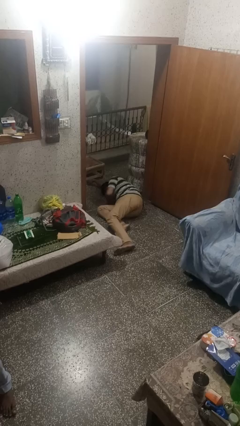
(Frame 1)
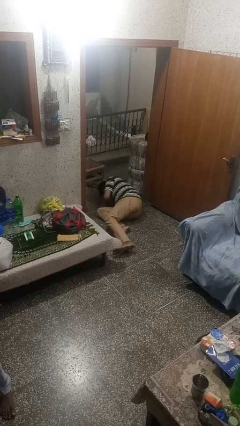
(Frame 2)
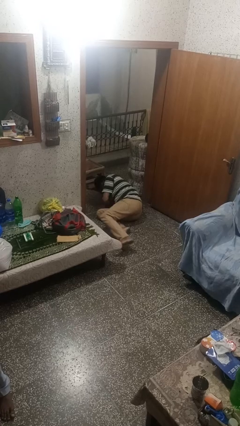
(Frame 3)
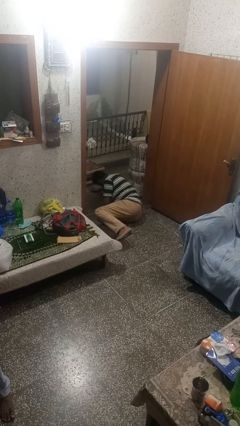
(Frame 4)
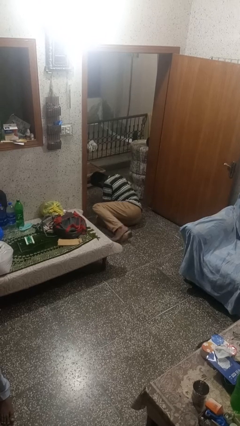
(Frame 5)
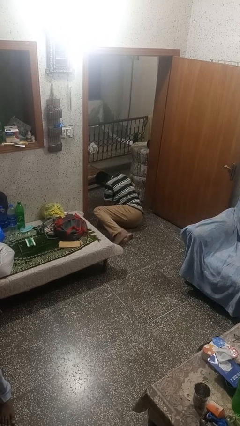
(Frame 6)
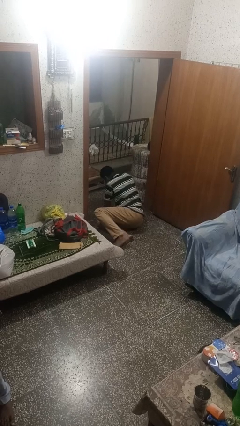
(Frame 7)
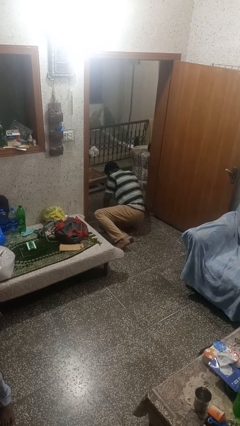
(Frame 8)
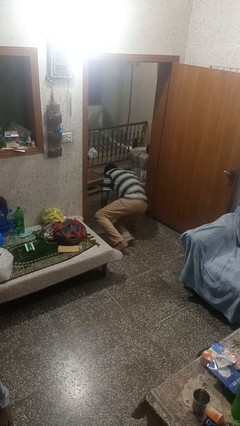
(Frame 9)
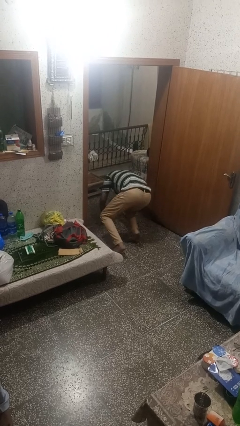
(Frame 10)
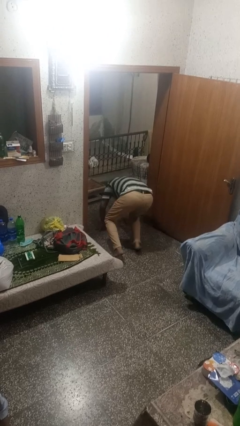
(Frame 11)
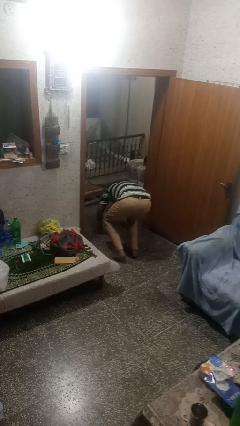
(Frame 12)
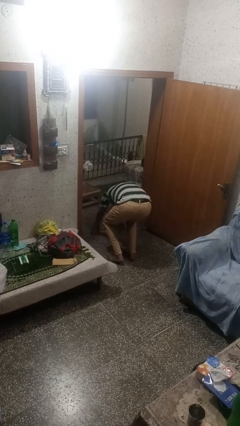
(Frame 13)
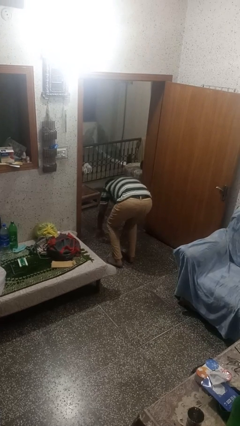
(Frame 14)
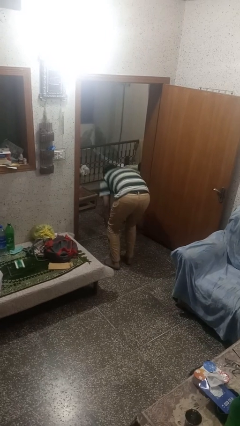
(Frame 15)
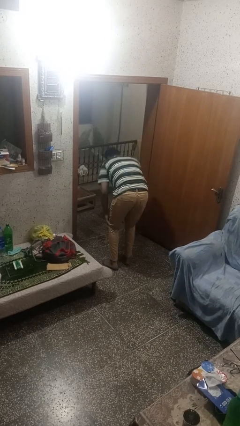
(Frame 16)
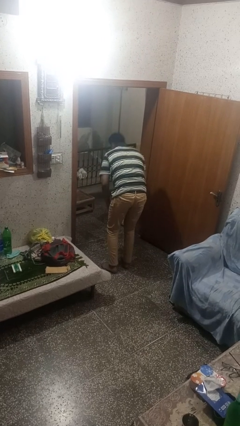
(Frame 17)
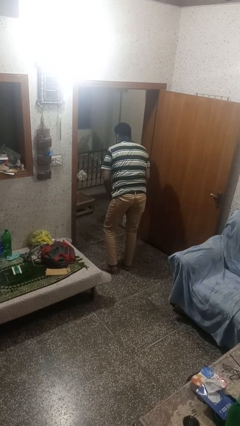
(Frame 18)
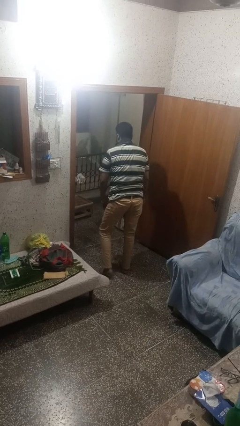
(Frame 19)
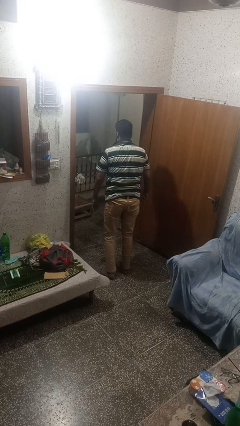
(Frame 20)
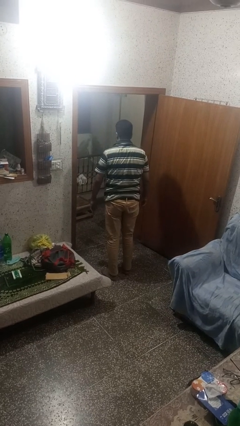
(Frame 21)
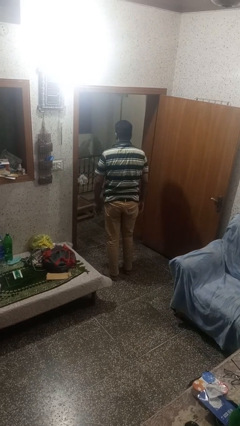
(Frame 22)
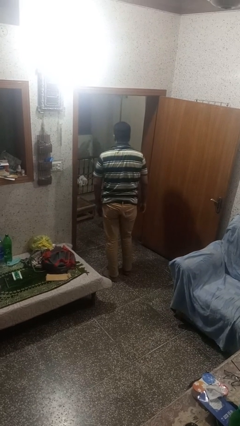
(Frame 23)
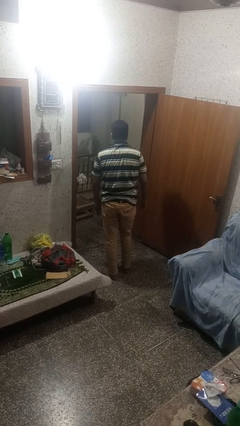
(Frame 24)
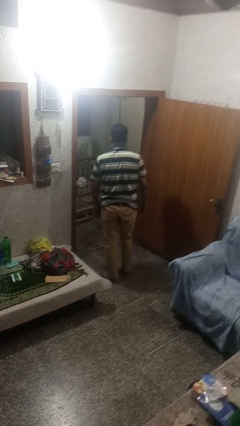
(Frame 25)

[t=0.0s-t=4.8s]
person stands up from floor

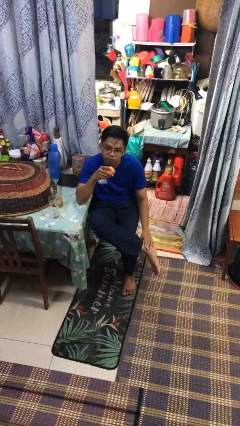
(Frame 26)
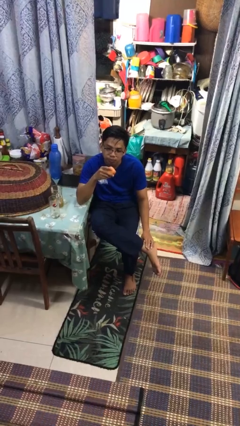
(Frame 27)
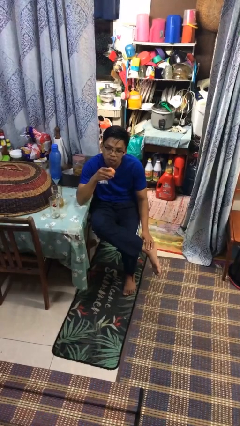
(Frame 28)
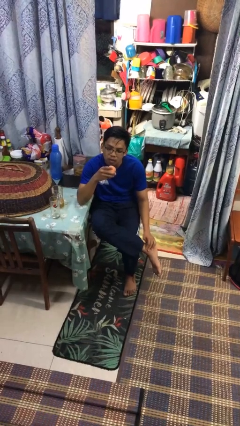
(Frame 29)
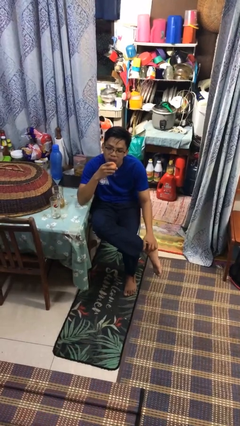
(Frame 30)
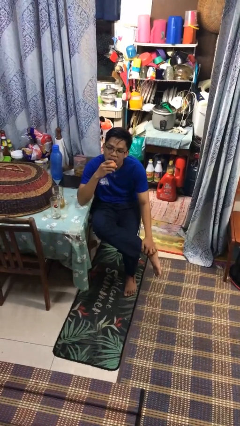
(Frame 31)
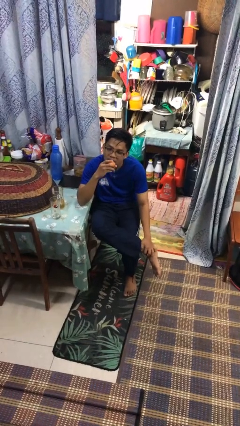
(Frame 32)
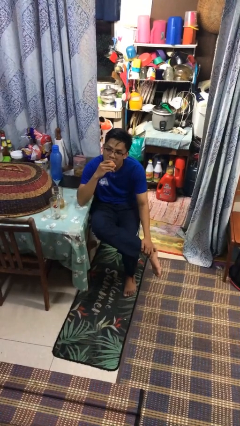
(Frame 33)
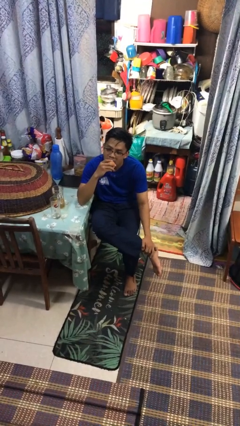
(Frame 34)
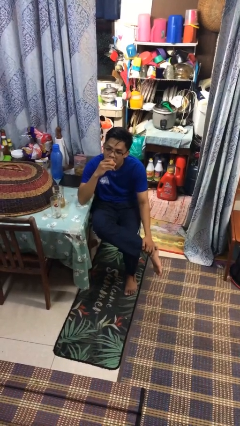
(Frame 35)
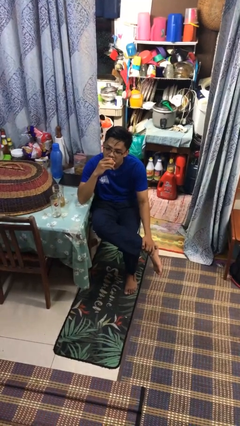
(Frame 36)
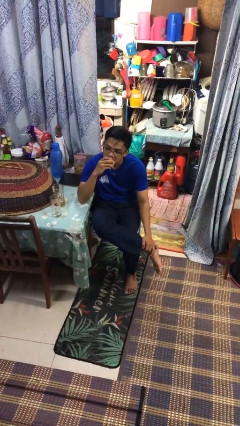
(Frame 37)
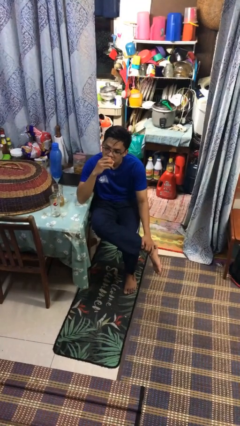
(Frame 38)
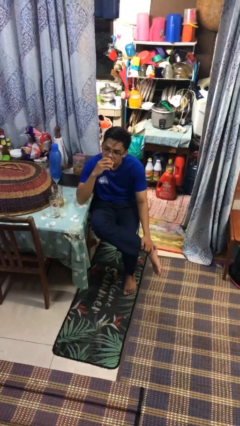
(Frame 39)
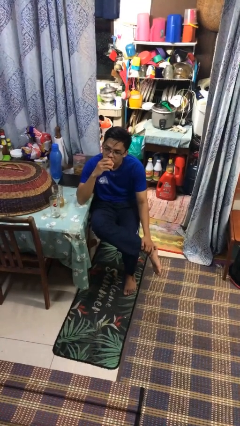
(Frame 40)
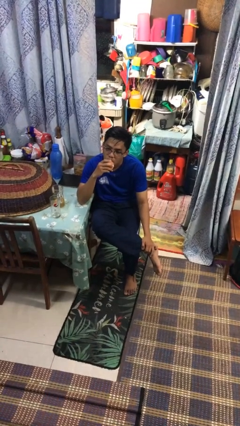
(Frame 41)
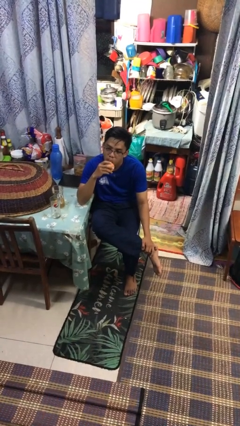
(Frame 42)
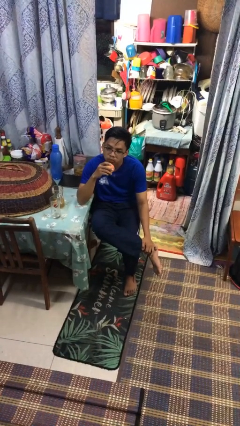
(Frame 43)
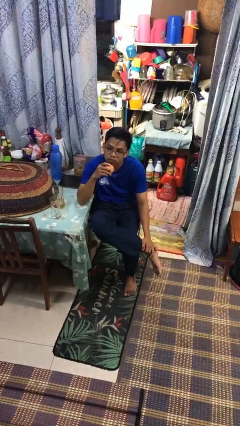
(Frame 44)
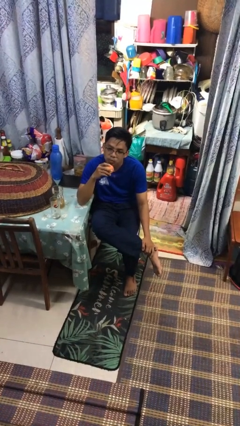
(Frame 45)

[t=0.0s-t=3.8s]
person eats apple

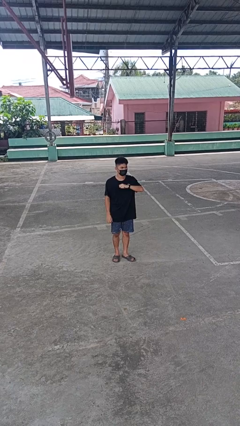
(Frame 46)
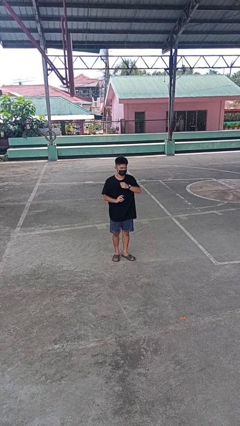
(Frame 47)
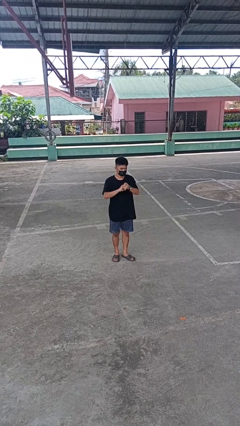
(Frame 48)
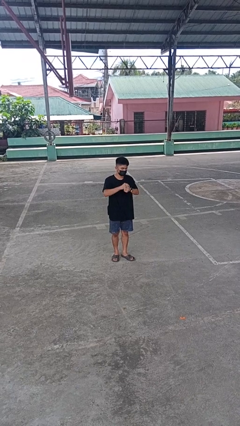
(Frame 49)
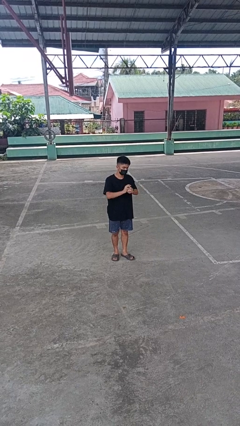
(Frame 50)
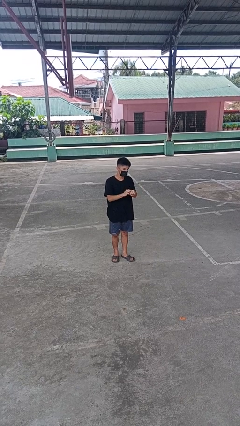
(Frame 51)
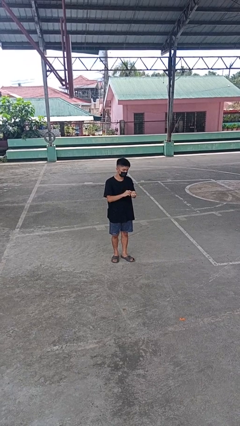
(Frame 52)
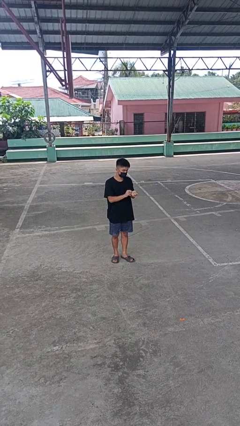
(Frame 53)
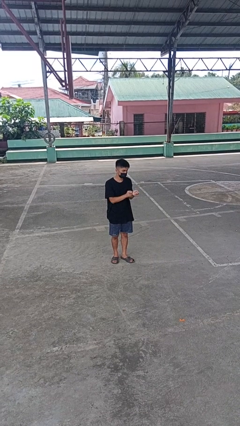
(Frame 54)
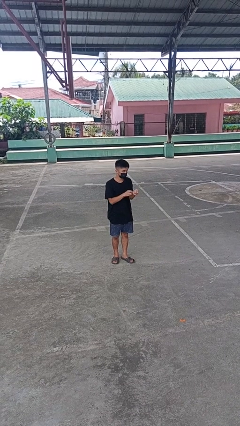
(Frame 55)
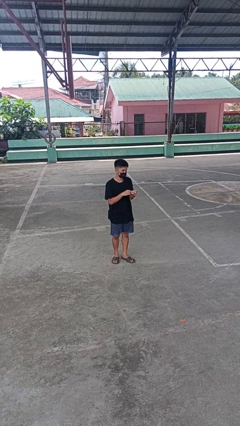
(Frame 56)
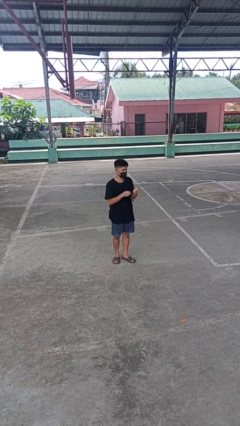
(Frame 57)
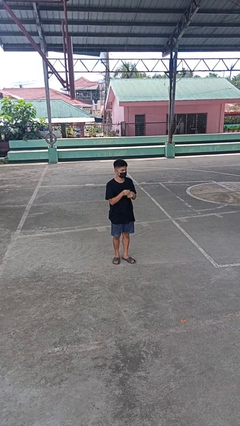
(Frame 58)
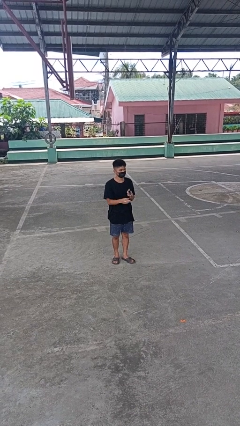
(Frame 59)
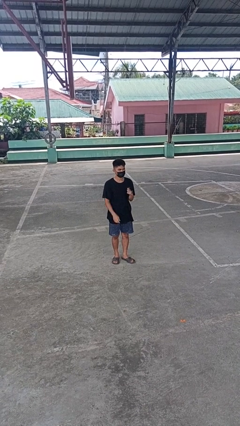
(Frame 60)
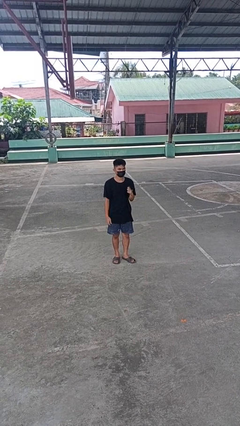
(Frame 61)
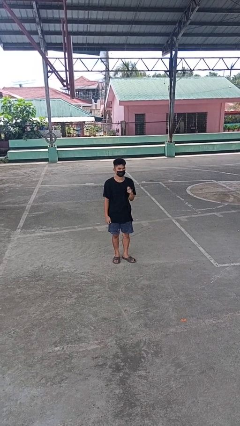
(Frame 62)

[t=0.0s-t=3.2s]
person takes off wristwatch

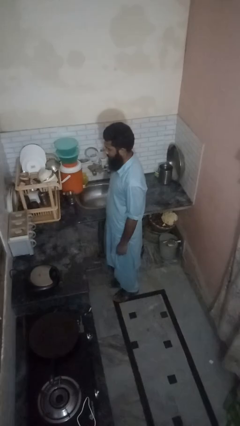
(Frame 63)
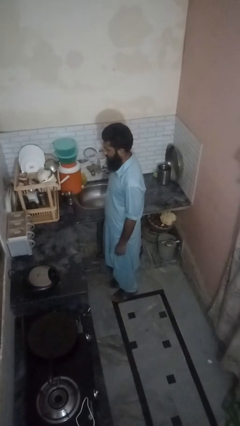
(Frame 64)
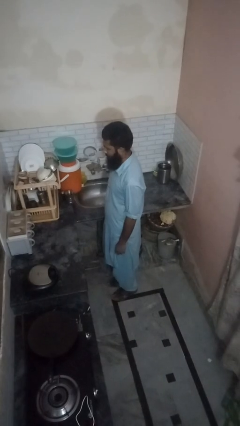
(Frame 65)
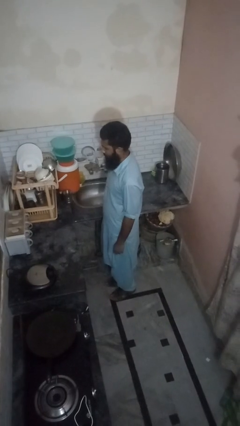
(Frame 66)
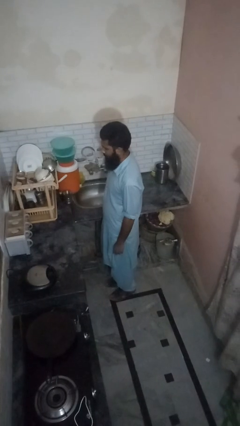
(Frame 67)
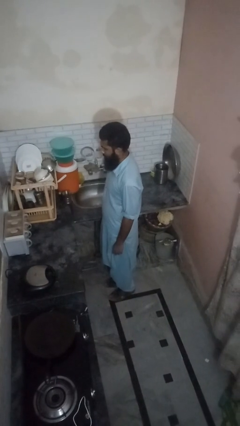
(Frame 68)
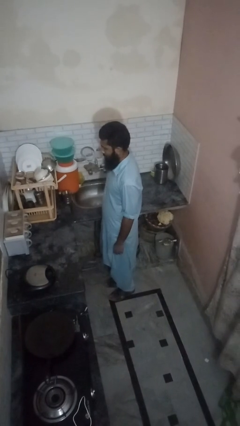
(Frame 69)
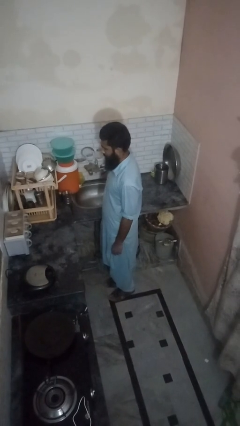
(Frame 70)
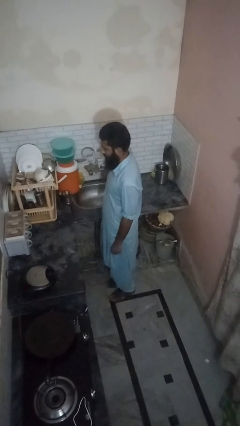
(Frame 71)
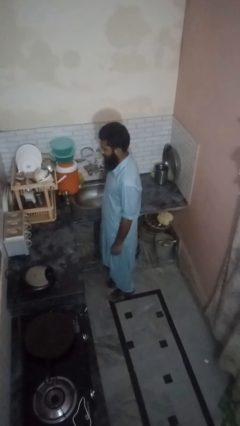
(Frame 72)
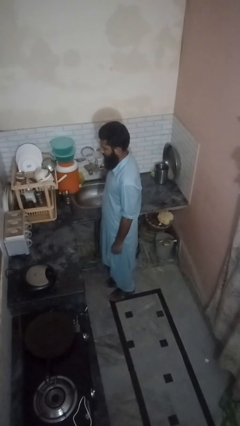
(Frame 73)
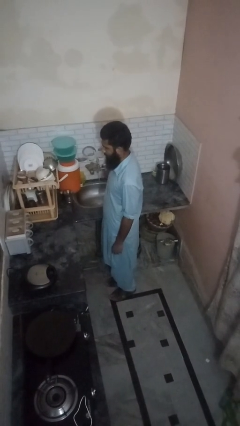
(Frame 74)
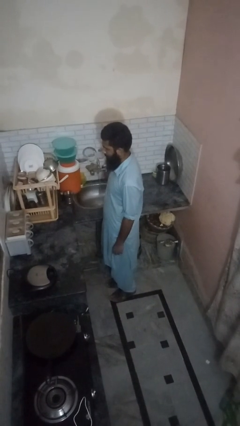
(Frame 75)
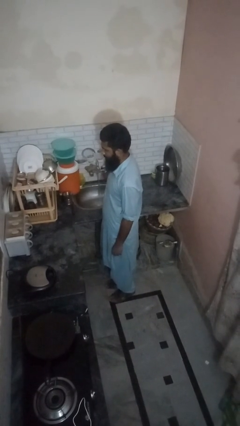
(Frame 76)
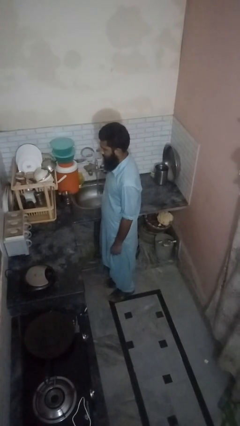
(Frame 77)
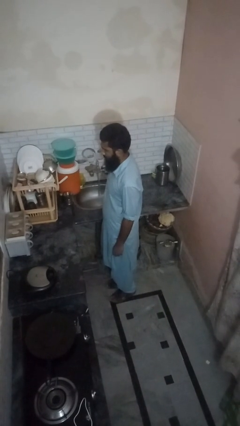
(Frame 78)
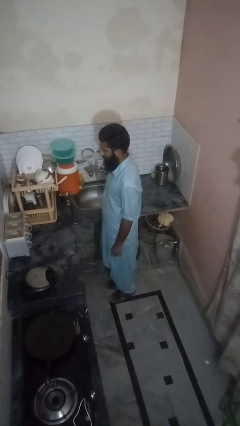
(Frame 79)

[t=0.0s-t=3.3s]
person turns on faucet

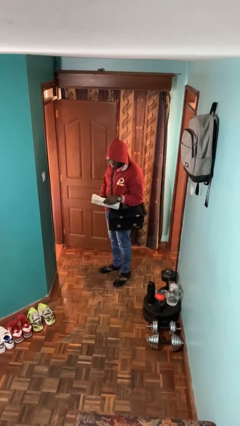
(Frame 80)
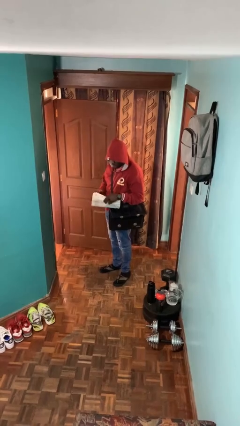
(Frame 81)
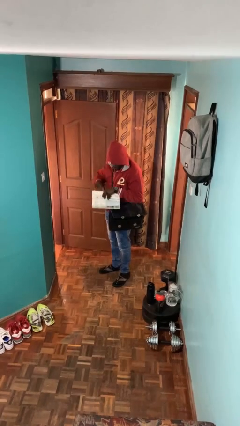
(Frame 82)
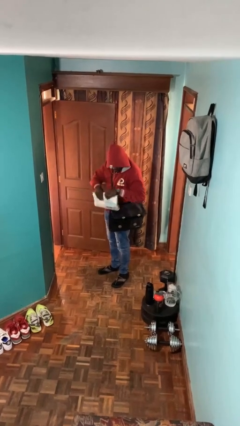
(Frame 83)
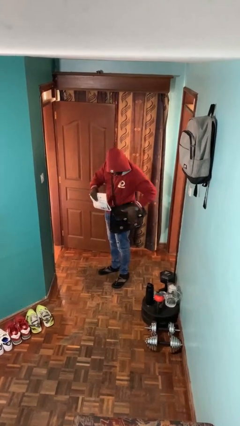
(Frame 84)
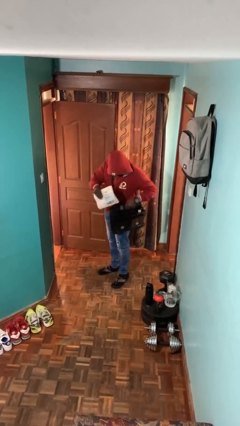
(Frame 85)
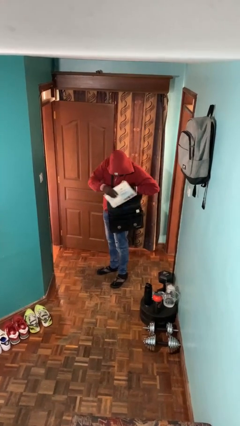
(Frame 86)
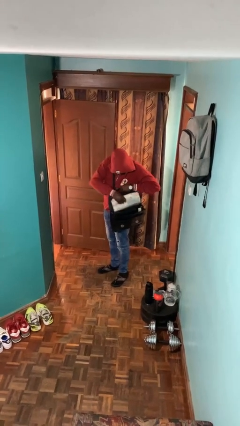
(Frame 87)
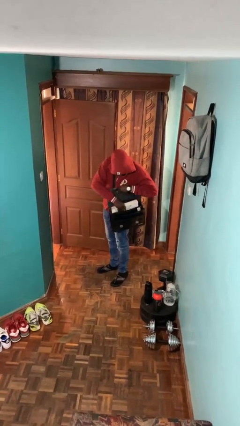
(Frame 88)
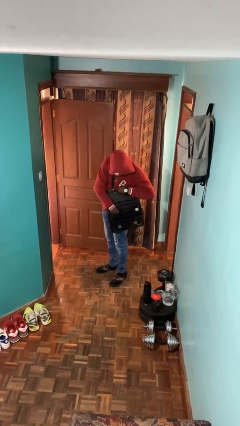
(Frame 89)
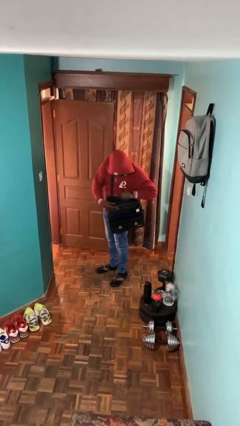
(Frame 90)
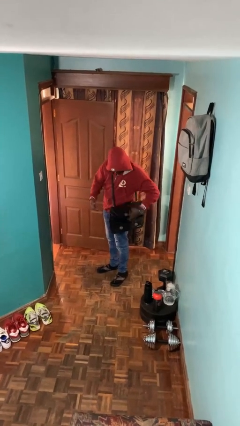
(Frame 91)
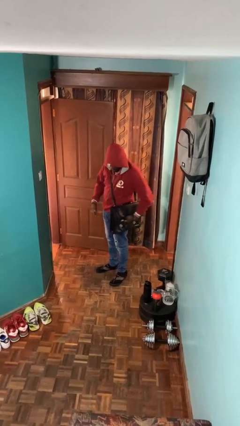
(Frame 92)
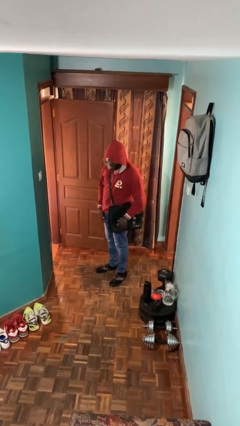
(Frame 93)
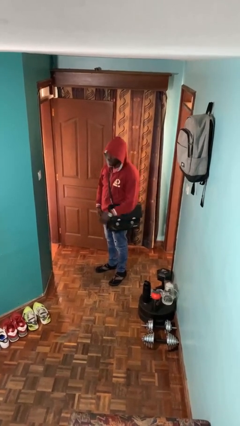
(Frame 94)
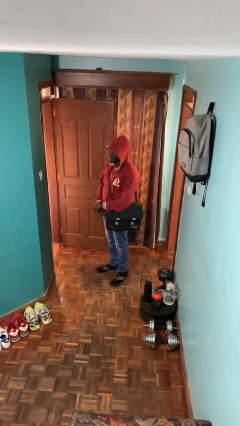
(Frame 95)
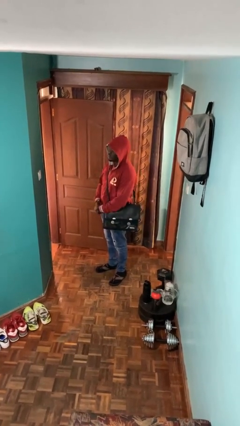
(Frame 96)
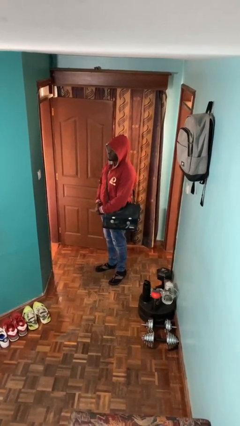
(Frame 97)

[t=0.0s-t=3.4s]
person puts object into purse
